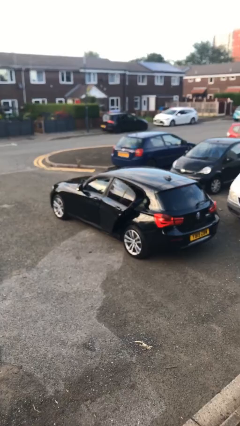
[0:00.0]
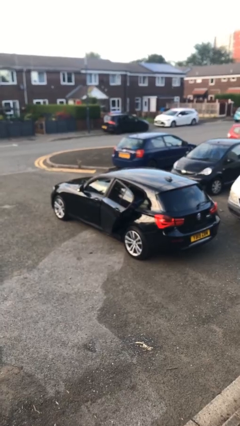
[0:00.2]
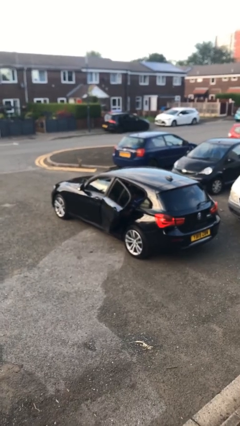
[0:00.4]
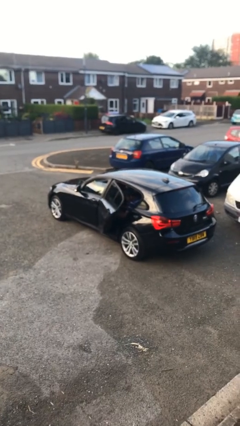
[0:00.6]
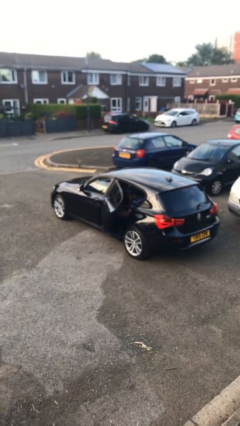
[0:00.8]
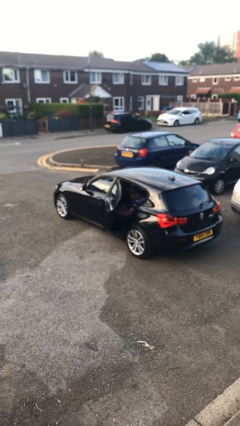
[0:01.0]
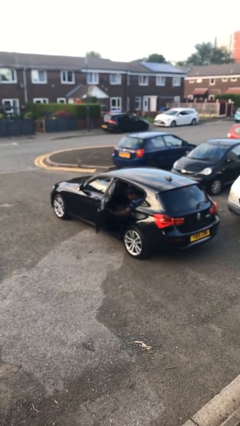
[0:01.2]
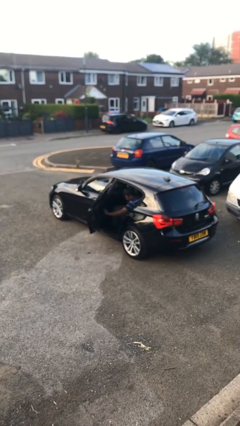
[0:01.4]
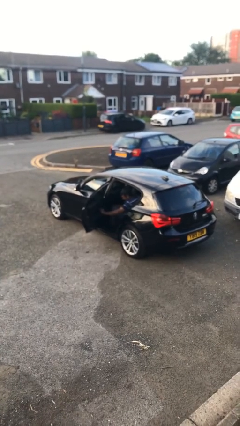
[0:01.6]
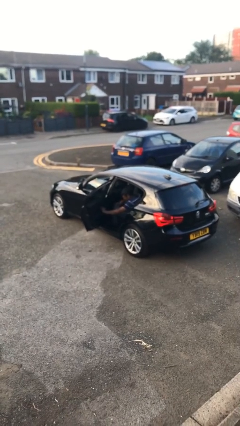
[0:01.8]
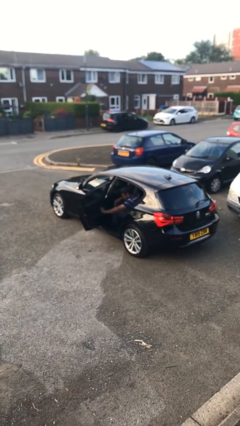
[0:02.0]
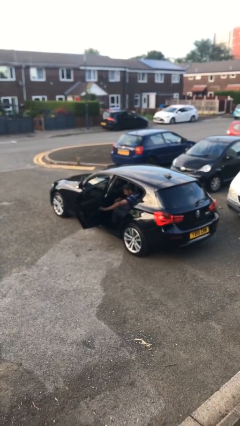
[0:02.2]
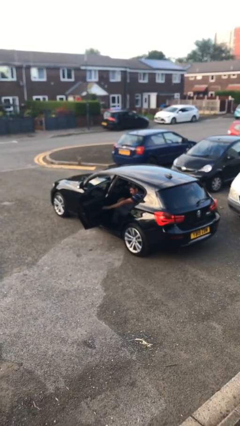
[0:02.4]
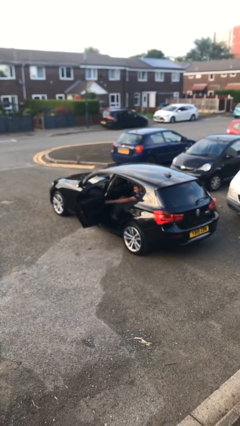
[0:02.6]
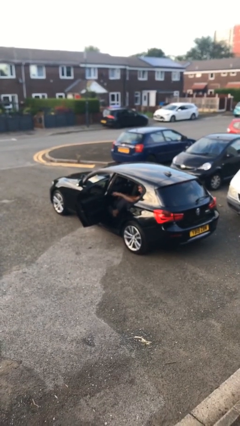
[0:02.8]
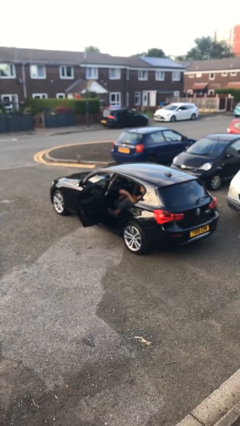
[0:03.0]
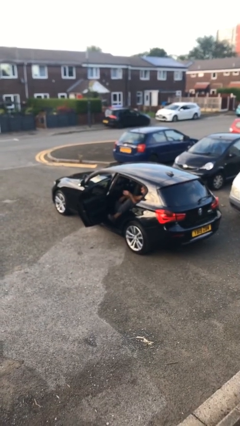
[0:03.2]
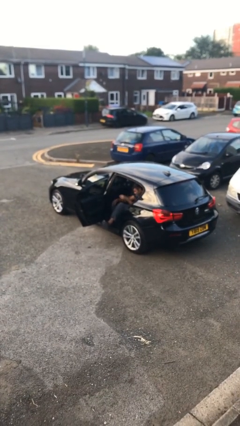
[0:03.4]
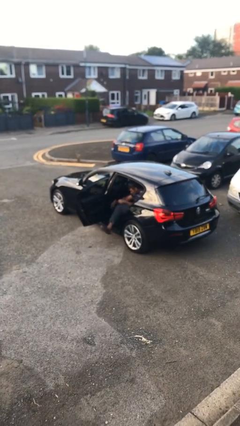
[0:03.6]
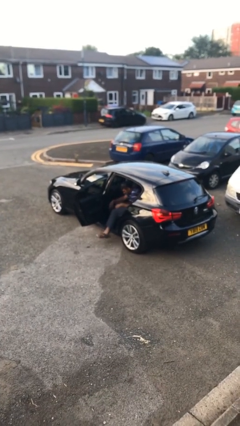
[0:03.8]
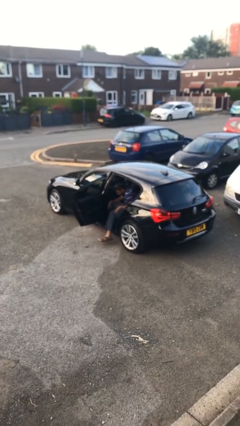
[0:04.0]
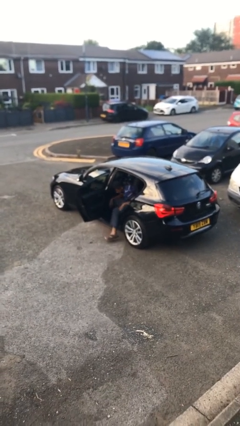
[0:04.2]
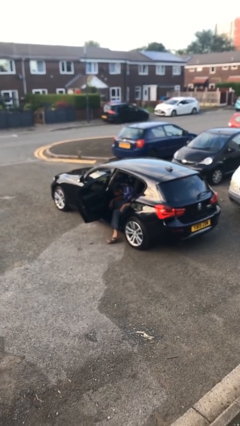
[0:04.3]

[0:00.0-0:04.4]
person opens car door

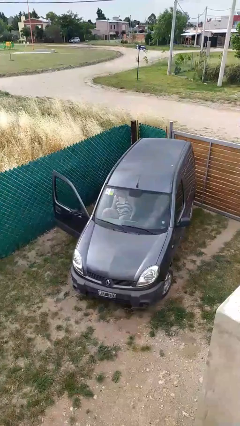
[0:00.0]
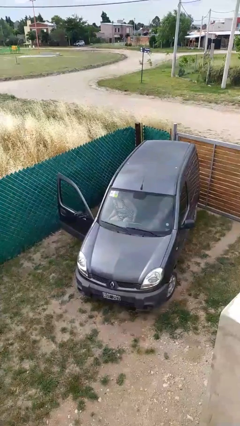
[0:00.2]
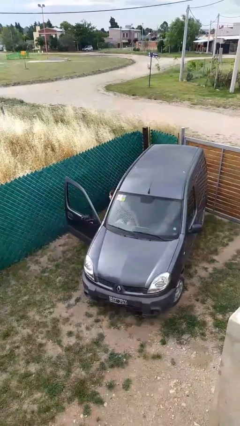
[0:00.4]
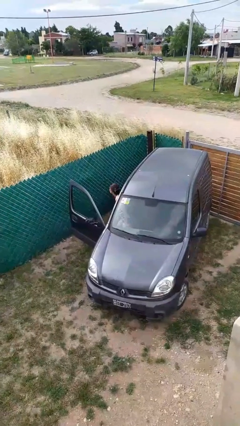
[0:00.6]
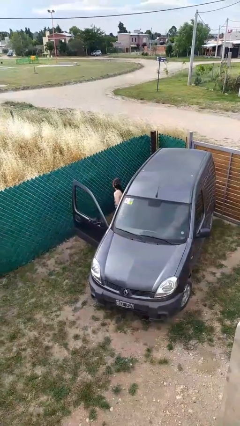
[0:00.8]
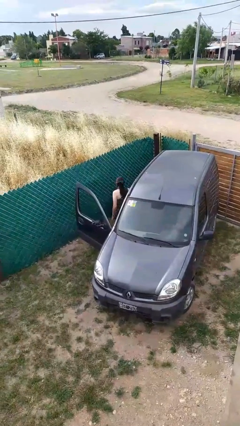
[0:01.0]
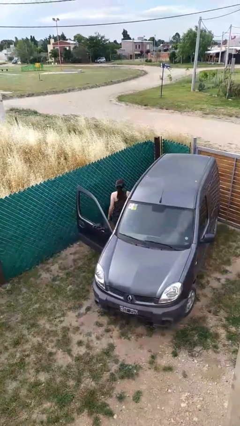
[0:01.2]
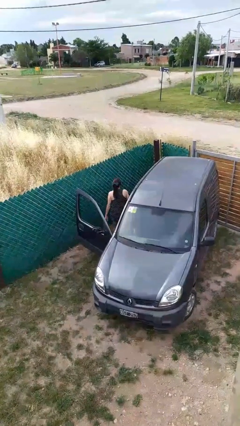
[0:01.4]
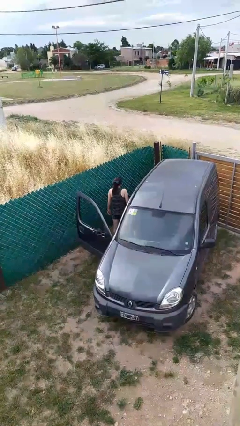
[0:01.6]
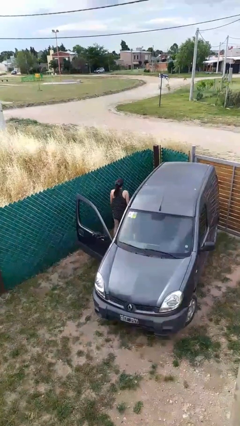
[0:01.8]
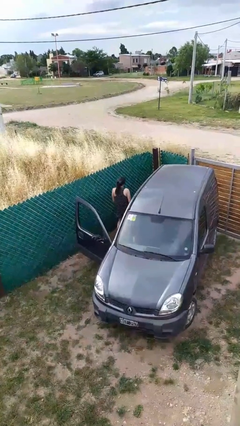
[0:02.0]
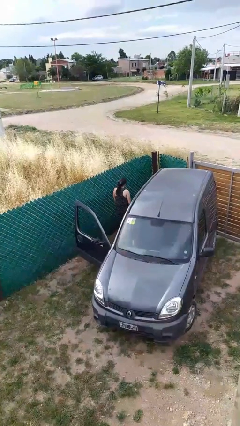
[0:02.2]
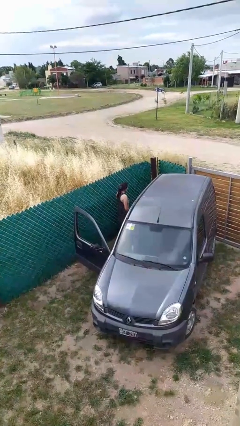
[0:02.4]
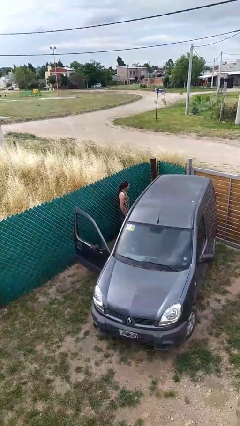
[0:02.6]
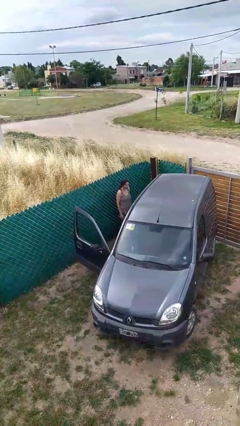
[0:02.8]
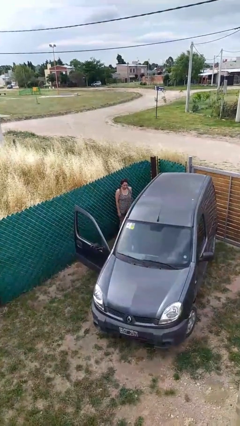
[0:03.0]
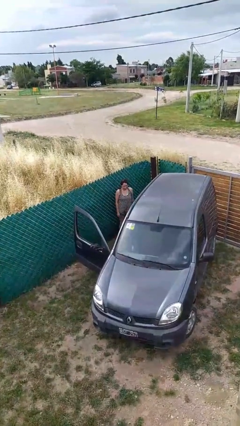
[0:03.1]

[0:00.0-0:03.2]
person exits car

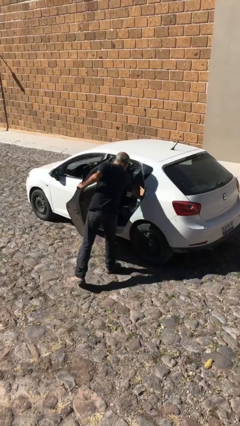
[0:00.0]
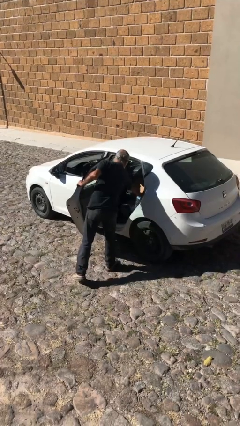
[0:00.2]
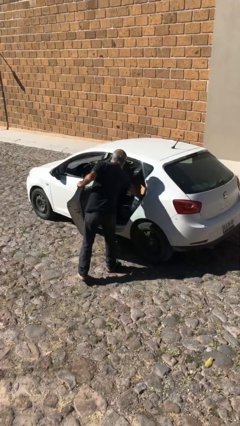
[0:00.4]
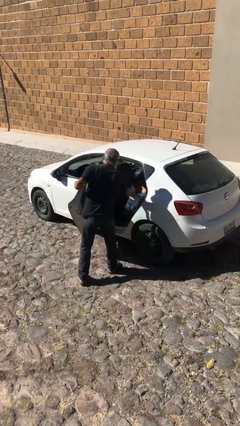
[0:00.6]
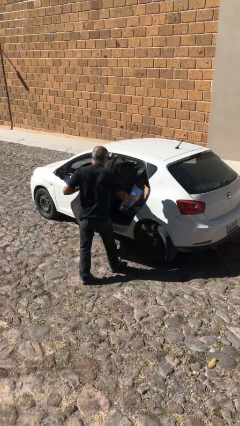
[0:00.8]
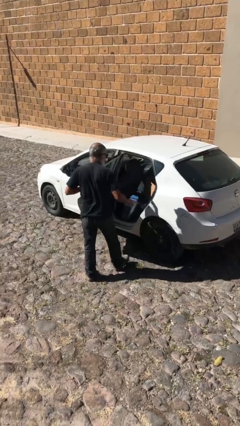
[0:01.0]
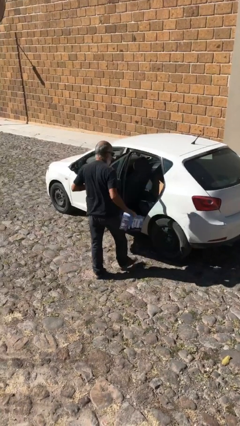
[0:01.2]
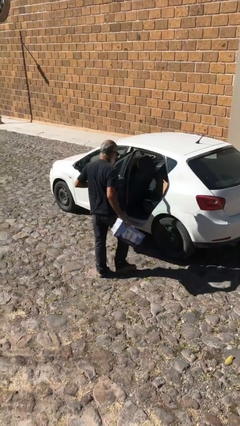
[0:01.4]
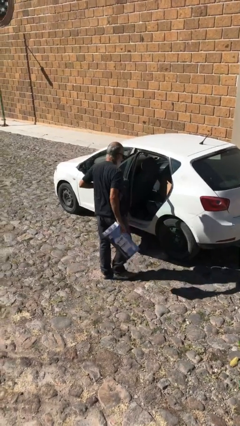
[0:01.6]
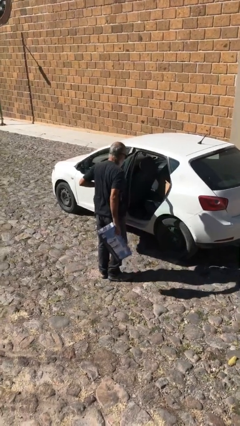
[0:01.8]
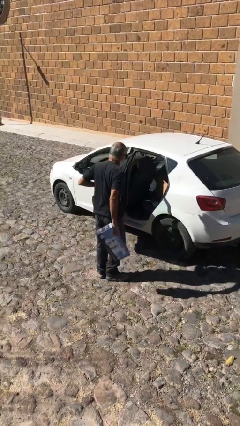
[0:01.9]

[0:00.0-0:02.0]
person unloads car

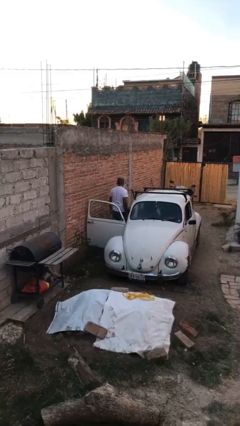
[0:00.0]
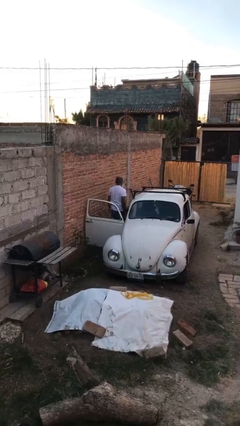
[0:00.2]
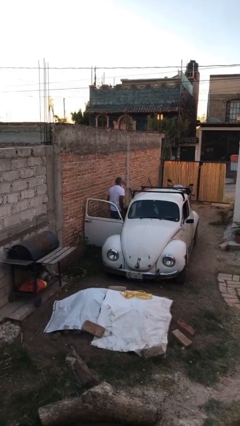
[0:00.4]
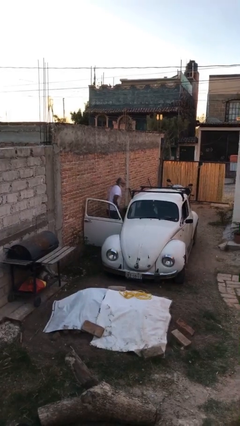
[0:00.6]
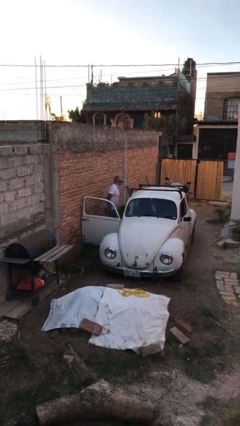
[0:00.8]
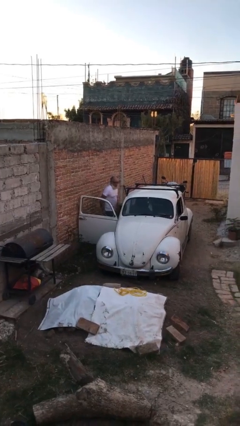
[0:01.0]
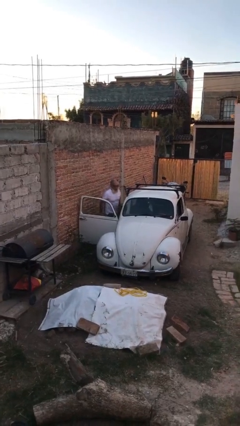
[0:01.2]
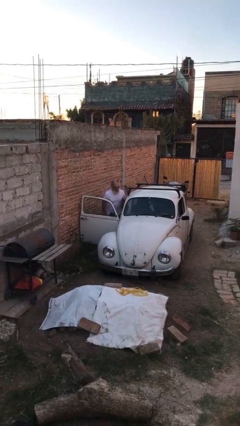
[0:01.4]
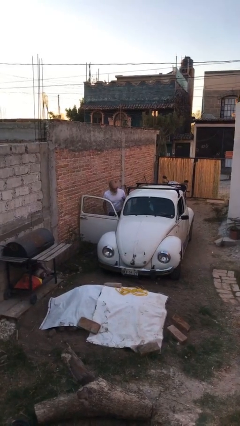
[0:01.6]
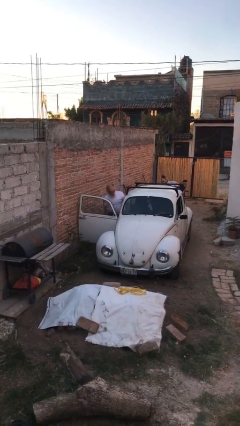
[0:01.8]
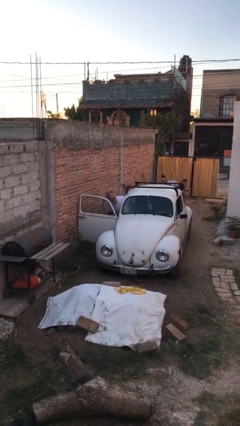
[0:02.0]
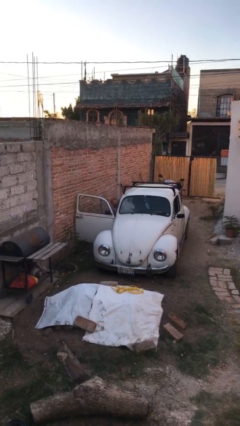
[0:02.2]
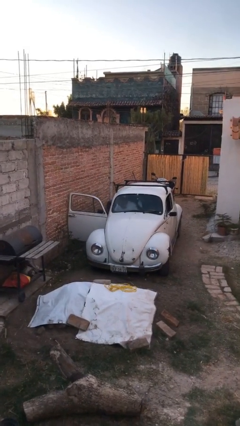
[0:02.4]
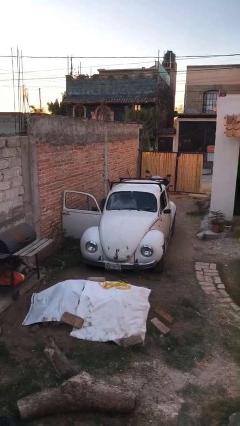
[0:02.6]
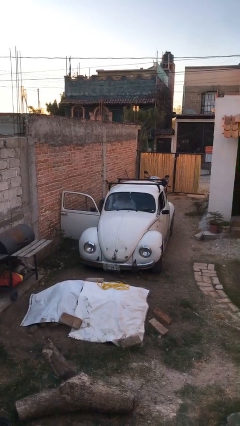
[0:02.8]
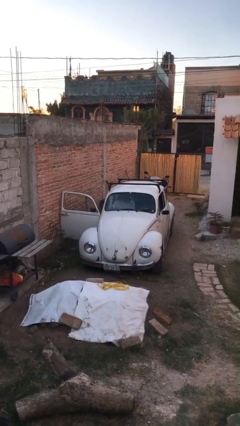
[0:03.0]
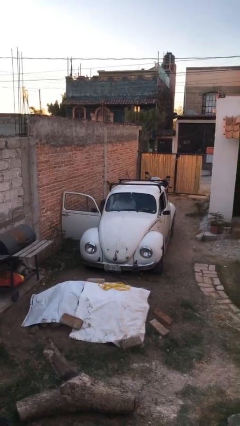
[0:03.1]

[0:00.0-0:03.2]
person enters car

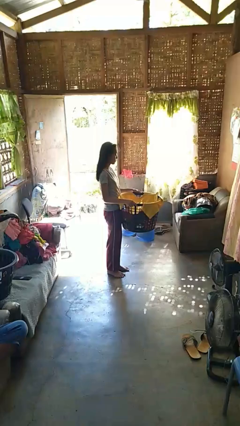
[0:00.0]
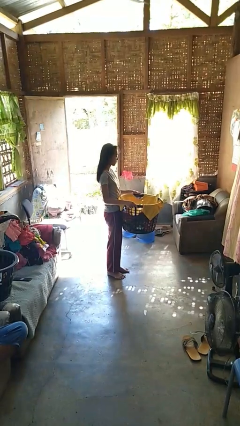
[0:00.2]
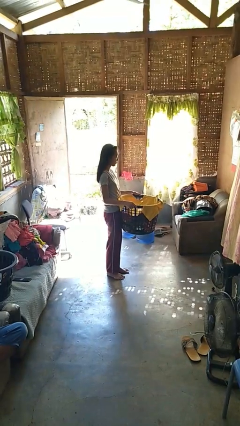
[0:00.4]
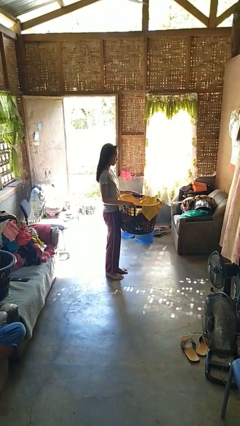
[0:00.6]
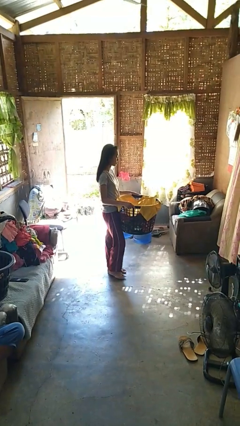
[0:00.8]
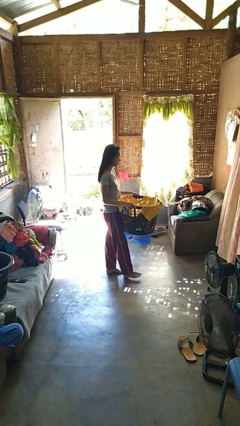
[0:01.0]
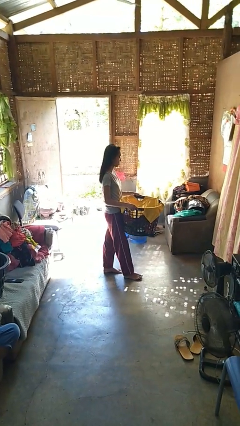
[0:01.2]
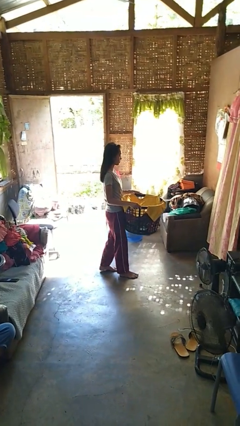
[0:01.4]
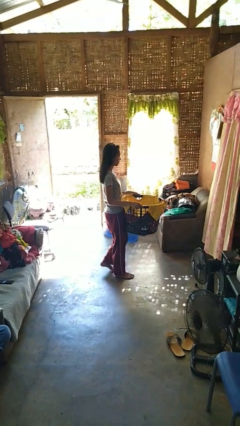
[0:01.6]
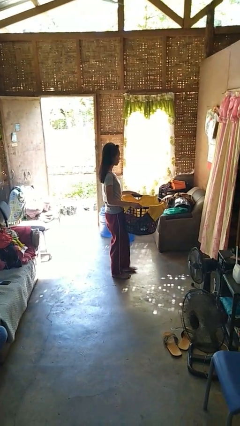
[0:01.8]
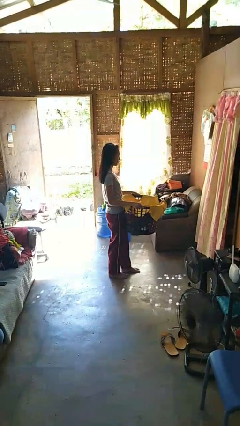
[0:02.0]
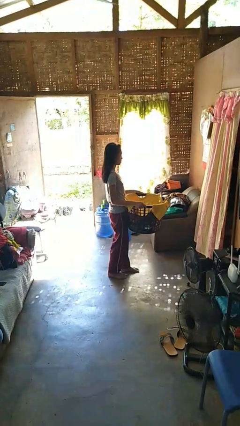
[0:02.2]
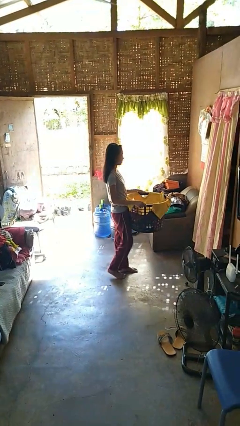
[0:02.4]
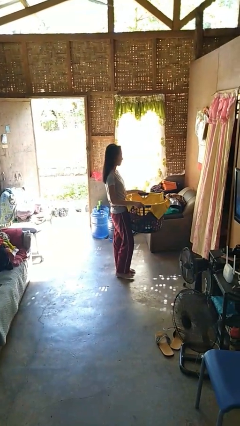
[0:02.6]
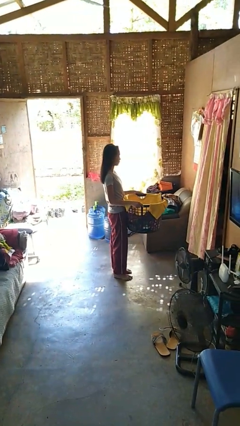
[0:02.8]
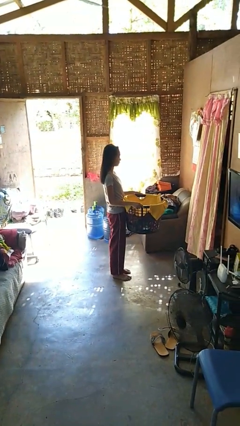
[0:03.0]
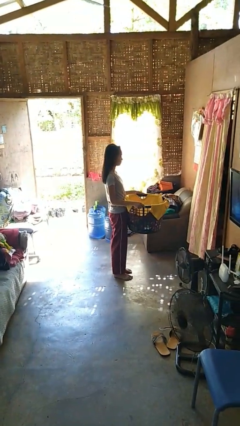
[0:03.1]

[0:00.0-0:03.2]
person carries laundry basket

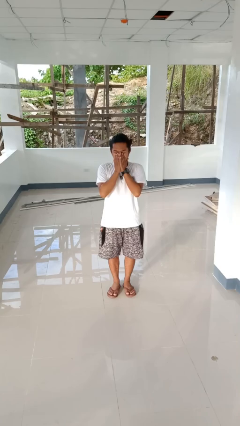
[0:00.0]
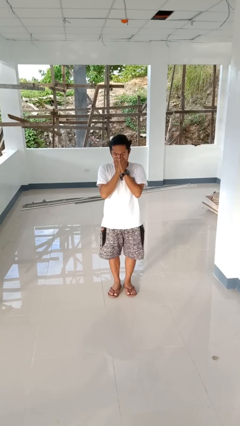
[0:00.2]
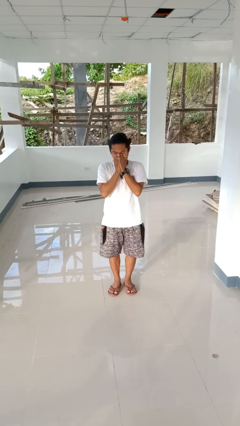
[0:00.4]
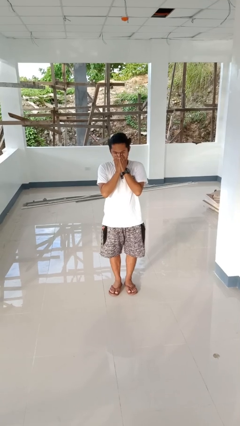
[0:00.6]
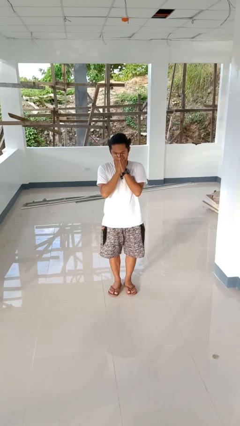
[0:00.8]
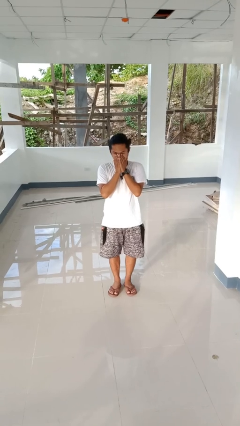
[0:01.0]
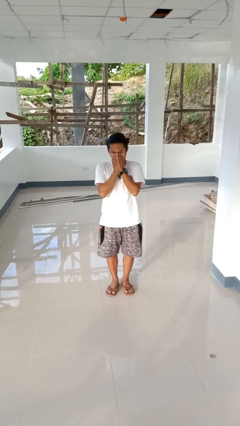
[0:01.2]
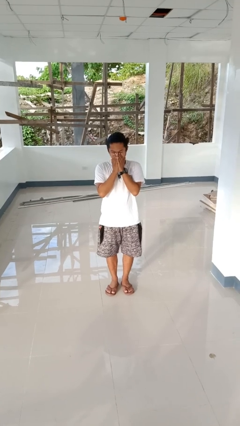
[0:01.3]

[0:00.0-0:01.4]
person sneezes into hand

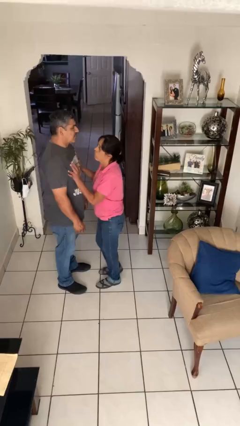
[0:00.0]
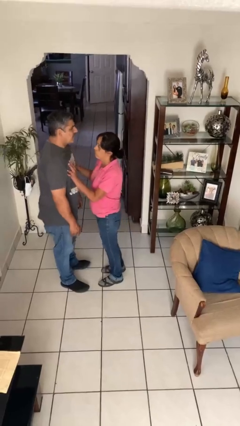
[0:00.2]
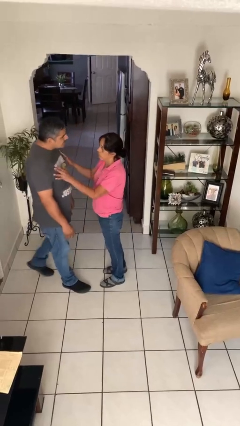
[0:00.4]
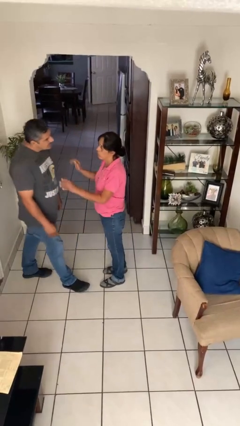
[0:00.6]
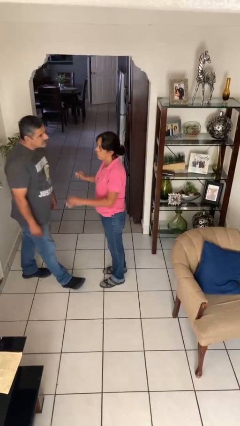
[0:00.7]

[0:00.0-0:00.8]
person shoves person
